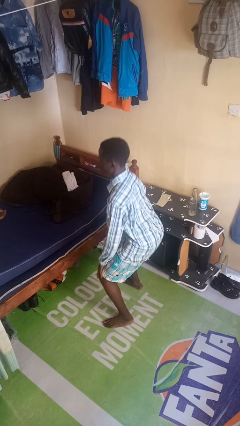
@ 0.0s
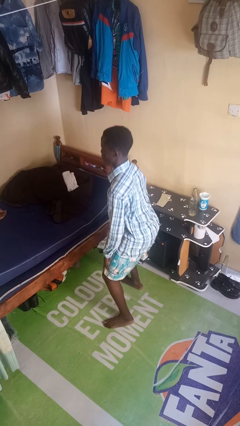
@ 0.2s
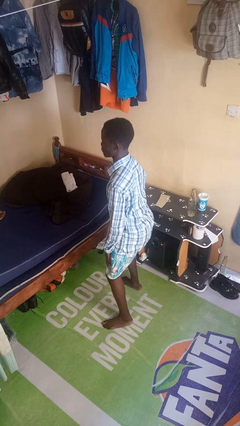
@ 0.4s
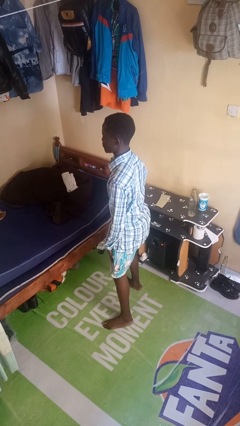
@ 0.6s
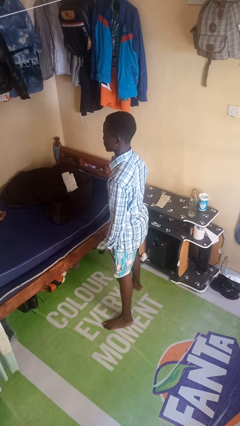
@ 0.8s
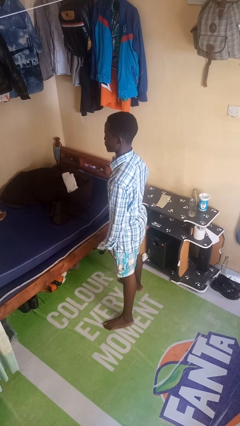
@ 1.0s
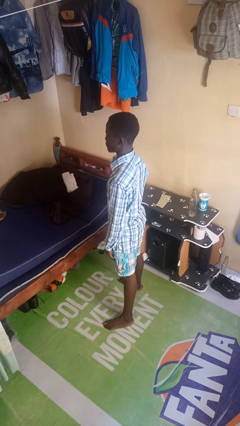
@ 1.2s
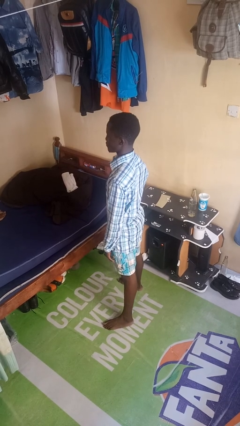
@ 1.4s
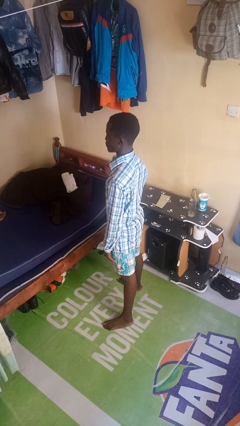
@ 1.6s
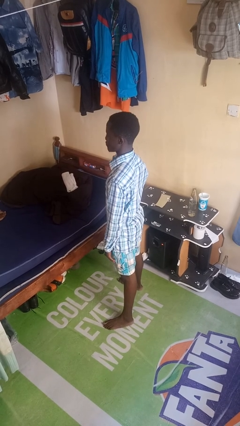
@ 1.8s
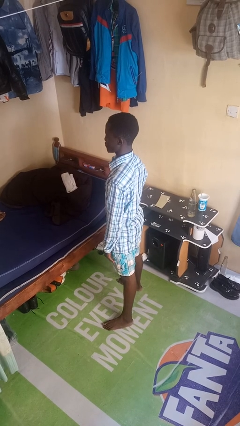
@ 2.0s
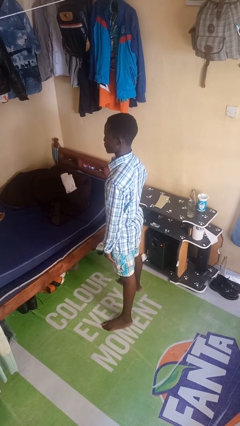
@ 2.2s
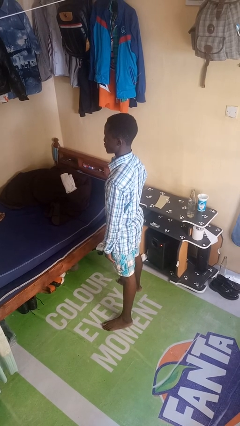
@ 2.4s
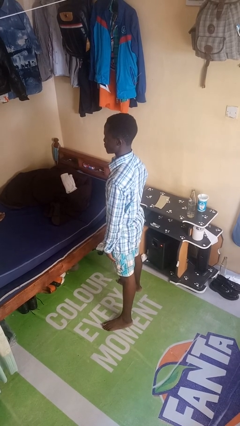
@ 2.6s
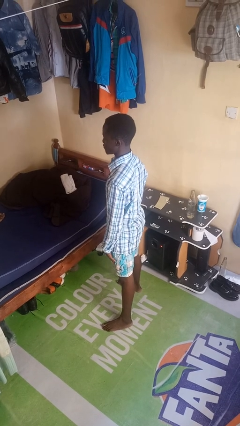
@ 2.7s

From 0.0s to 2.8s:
person stands up

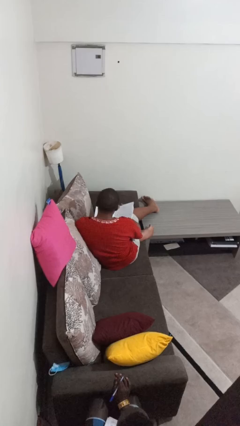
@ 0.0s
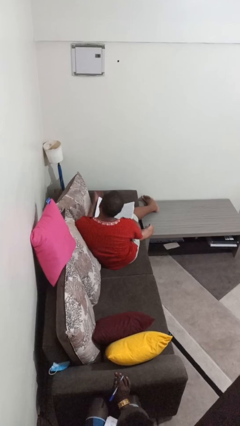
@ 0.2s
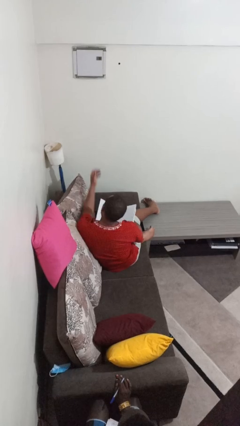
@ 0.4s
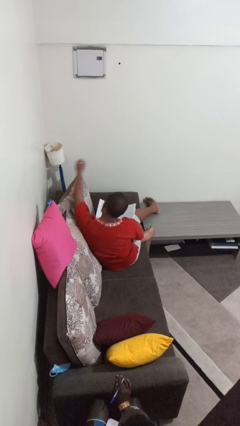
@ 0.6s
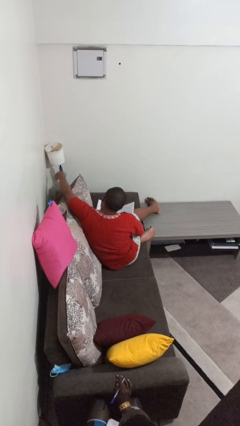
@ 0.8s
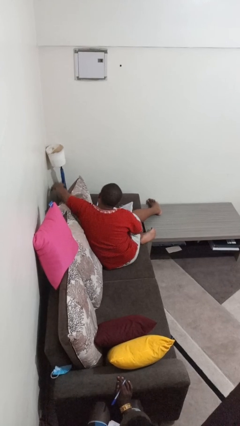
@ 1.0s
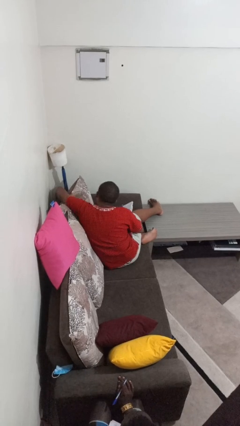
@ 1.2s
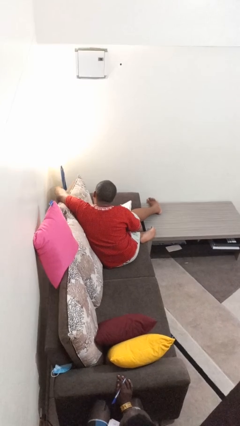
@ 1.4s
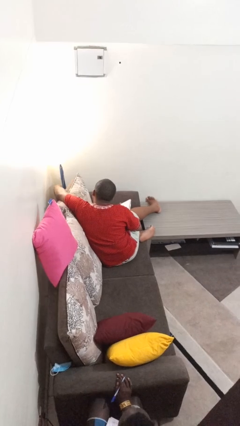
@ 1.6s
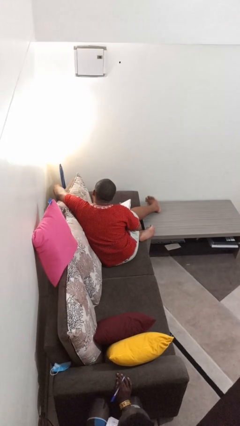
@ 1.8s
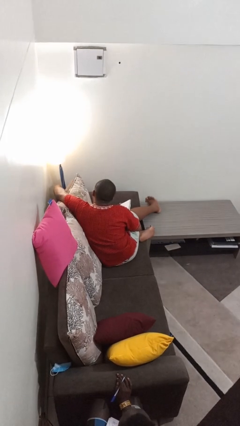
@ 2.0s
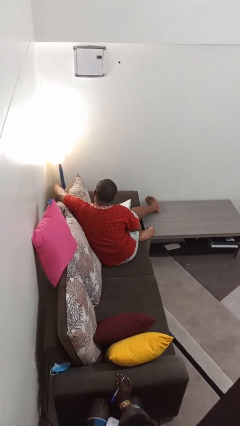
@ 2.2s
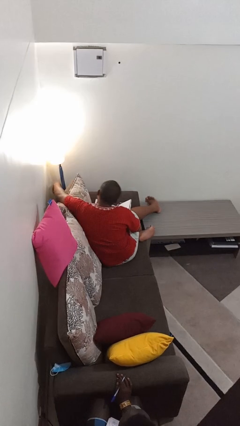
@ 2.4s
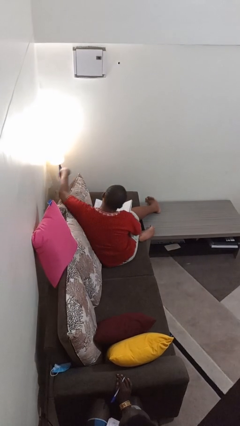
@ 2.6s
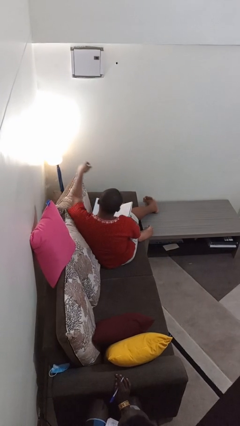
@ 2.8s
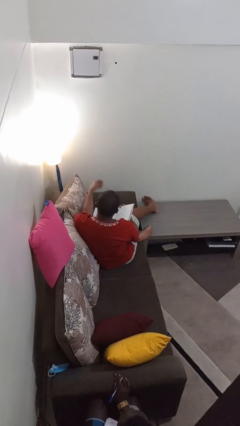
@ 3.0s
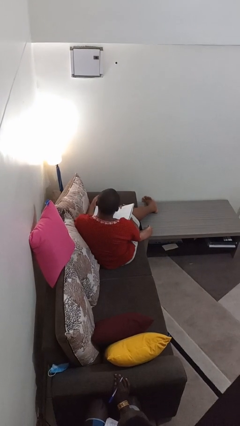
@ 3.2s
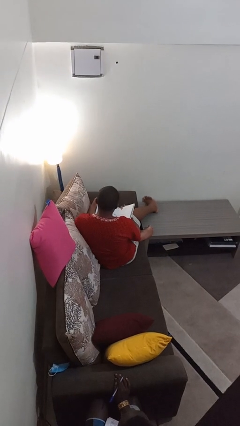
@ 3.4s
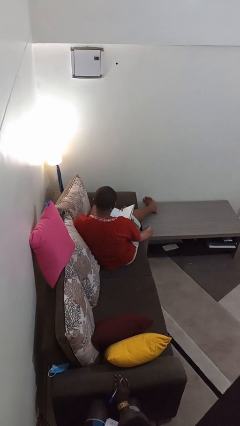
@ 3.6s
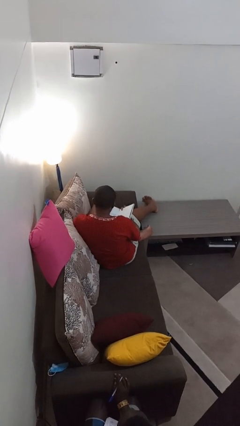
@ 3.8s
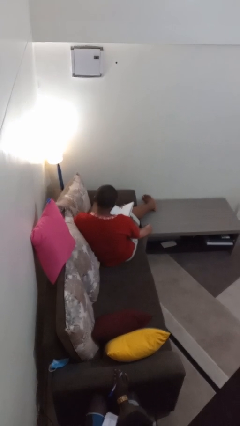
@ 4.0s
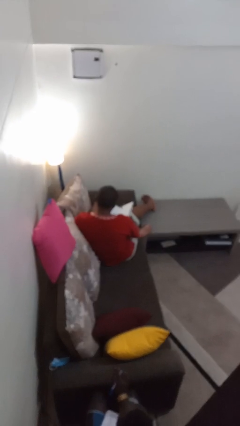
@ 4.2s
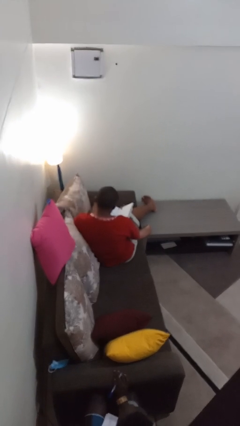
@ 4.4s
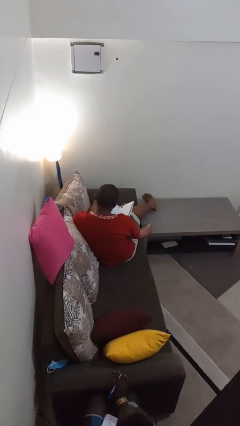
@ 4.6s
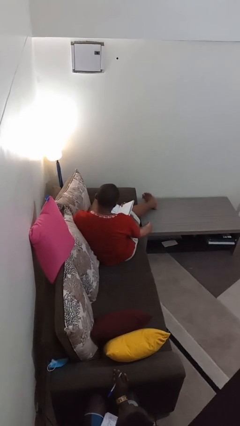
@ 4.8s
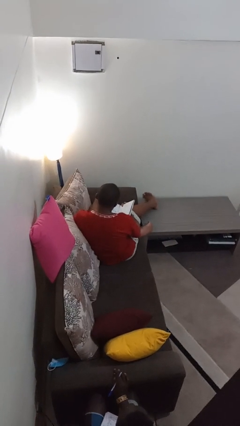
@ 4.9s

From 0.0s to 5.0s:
person turns on lamp

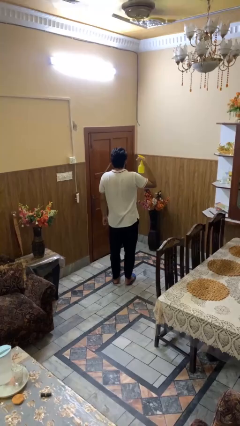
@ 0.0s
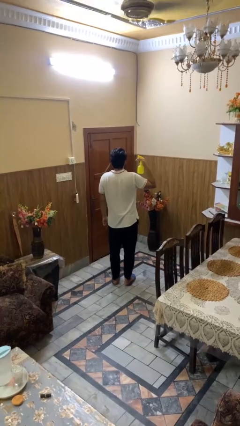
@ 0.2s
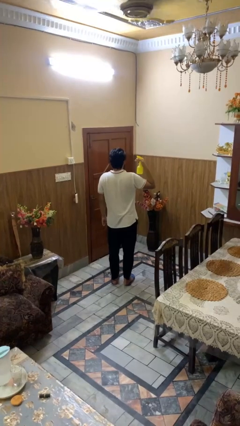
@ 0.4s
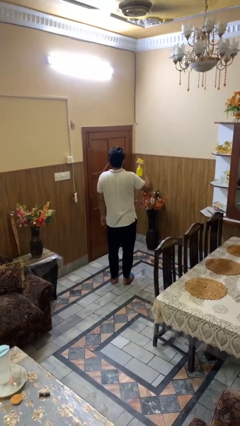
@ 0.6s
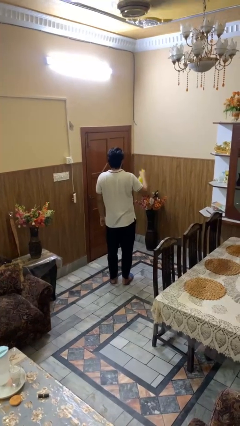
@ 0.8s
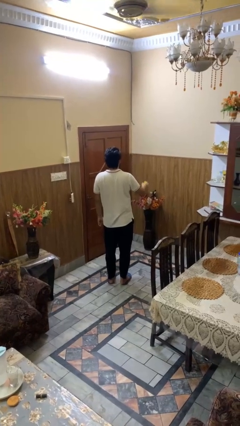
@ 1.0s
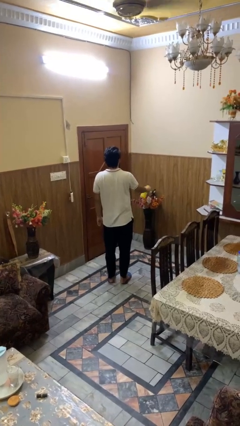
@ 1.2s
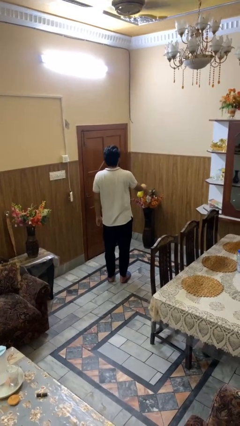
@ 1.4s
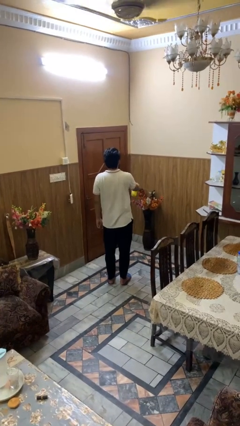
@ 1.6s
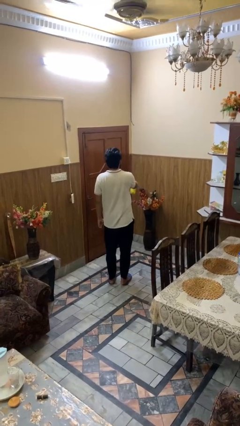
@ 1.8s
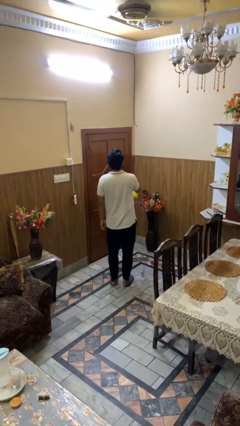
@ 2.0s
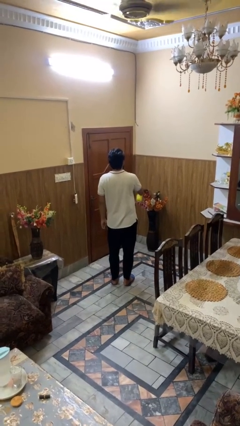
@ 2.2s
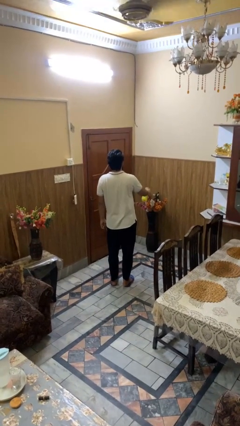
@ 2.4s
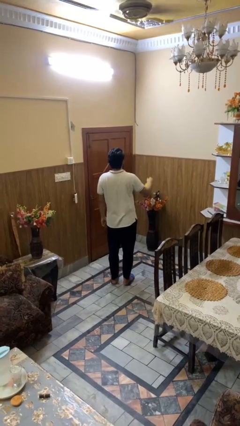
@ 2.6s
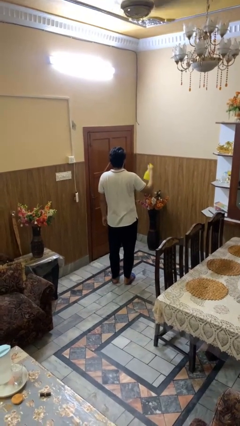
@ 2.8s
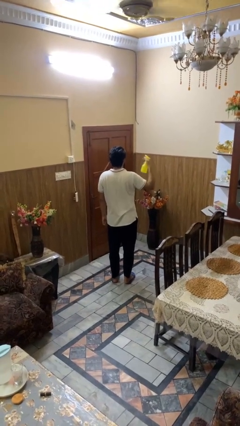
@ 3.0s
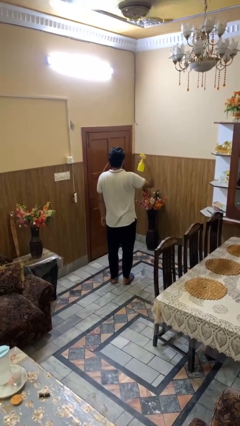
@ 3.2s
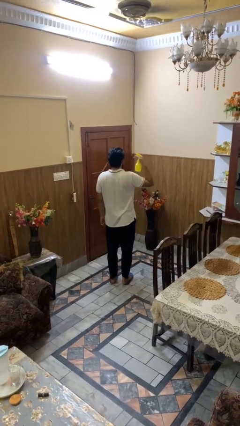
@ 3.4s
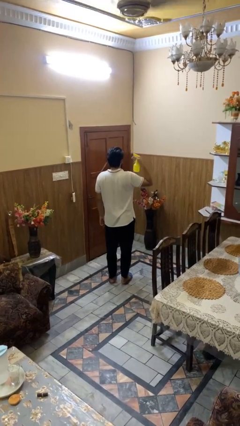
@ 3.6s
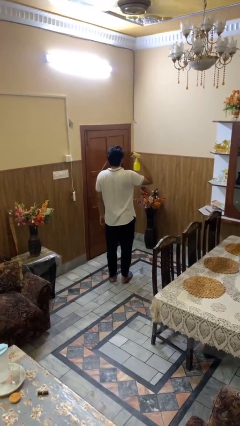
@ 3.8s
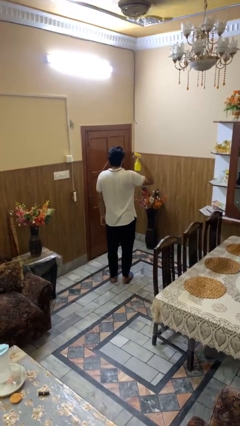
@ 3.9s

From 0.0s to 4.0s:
person sprays from bottle

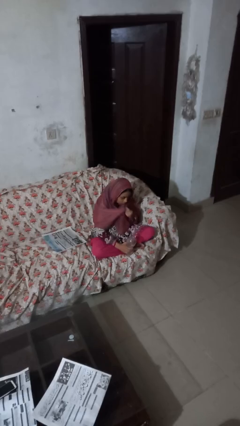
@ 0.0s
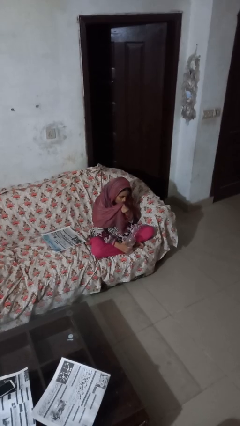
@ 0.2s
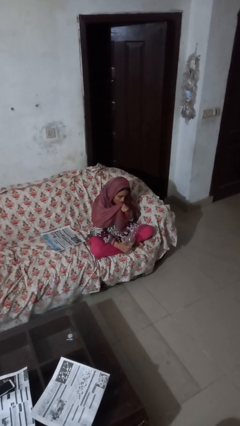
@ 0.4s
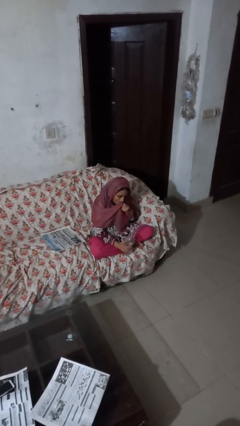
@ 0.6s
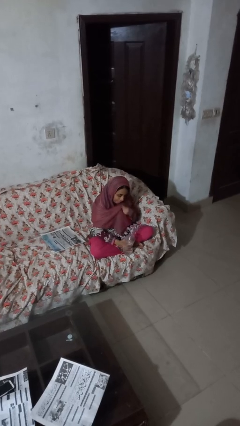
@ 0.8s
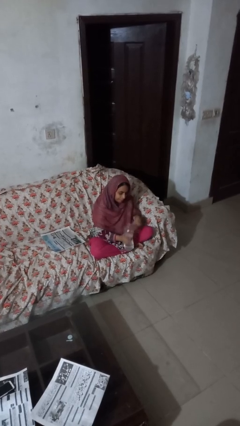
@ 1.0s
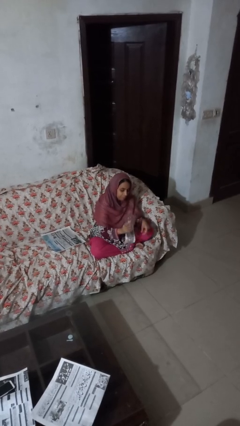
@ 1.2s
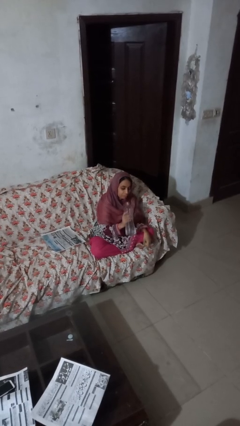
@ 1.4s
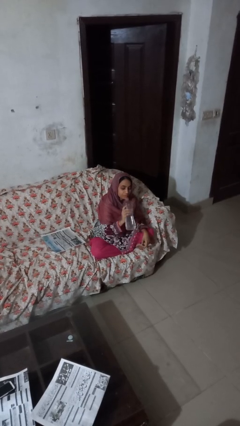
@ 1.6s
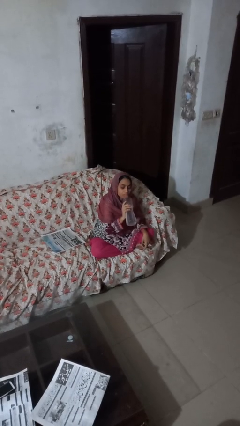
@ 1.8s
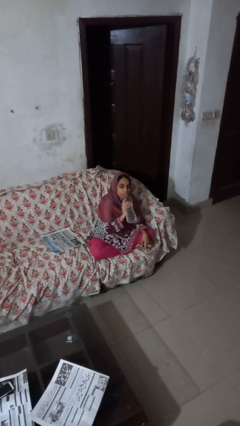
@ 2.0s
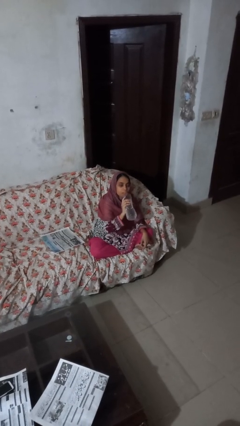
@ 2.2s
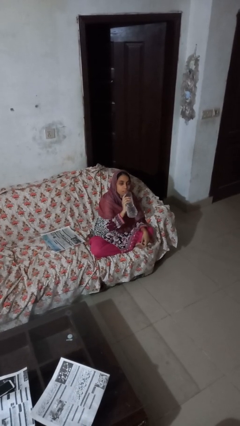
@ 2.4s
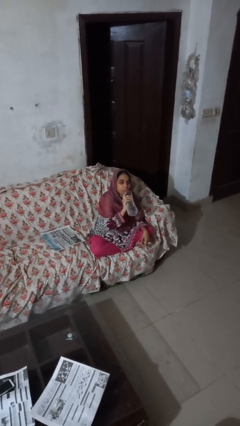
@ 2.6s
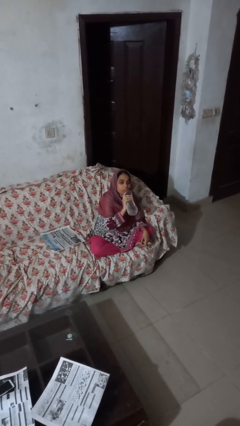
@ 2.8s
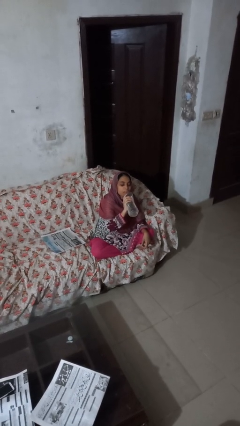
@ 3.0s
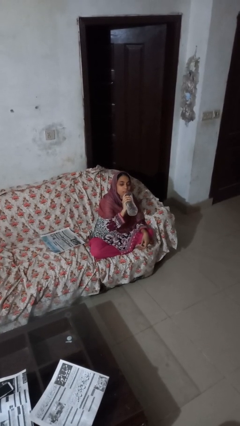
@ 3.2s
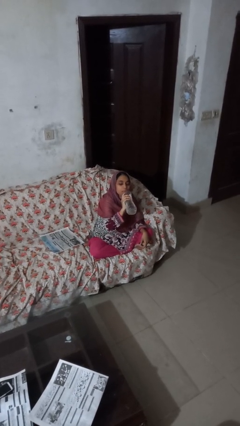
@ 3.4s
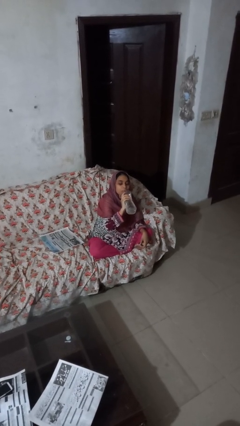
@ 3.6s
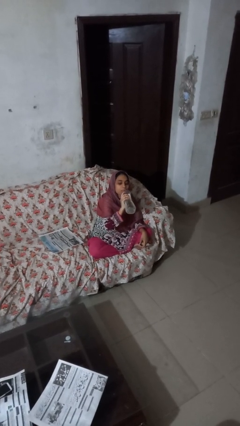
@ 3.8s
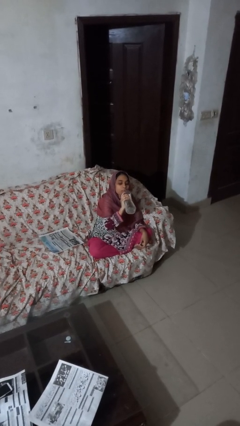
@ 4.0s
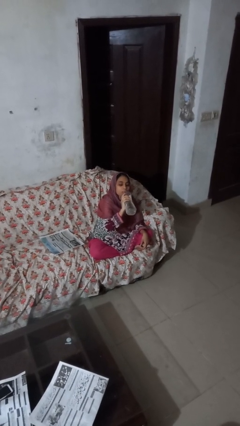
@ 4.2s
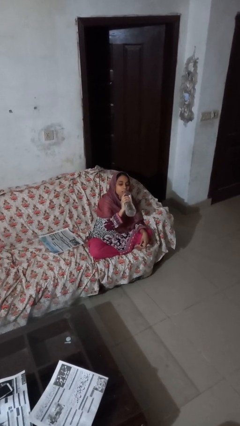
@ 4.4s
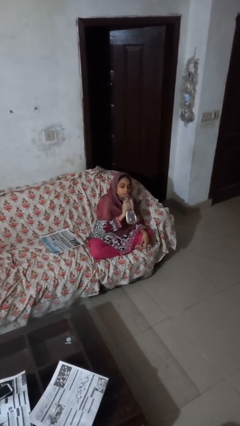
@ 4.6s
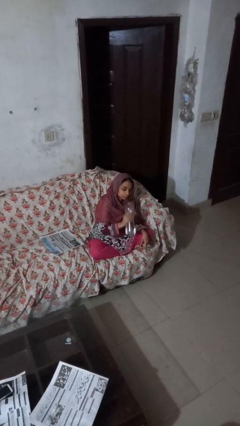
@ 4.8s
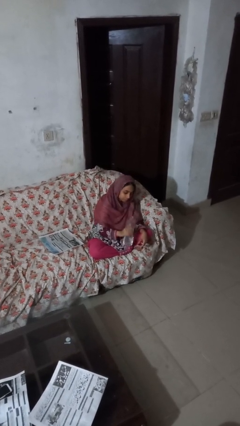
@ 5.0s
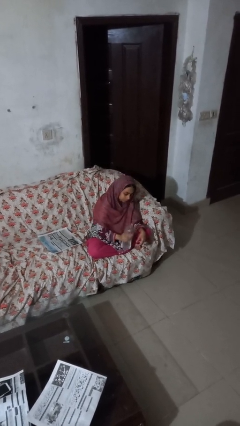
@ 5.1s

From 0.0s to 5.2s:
person drinks from bottle

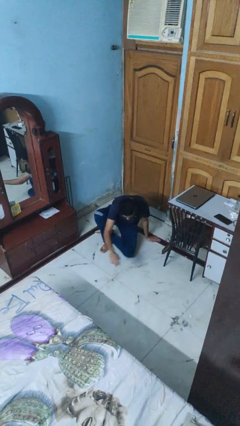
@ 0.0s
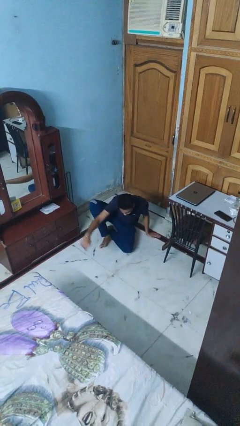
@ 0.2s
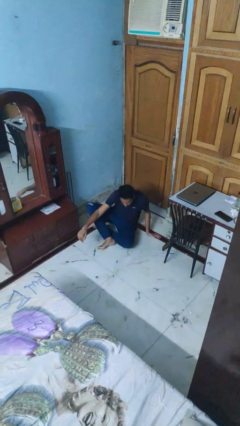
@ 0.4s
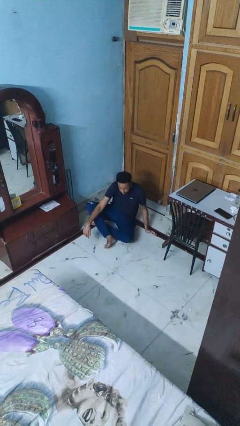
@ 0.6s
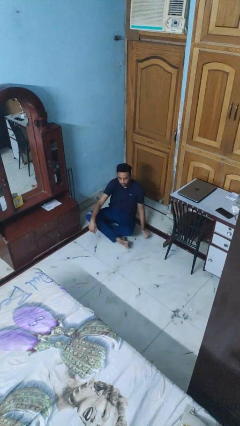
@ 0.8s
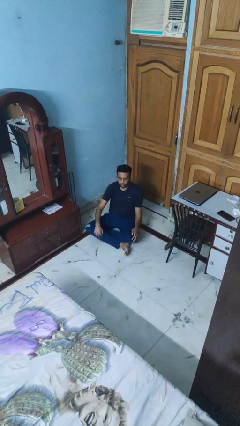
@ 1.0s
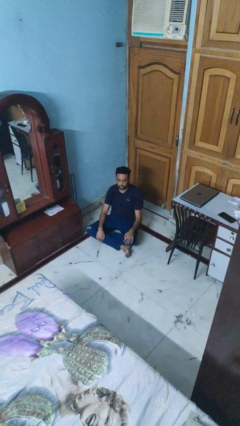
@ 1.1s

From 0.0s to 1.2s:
person sits crisscross
